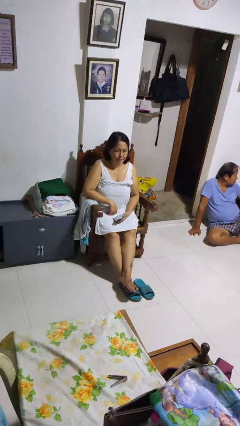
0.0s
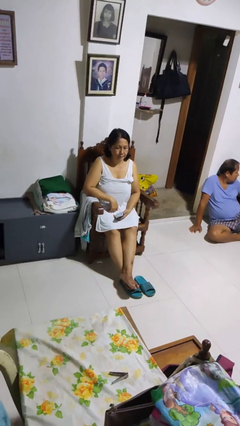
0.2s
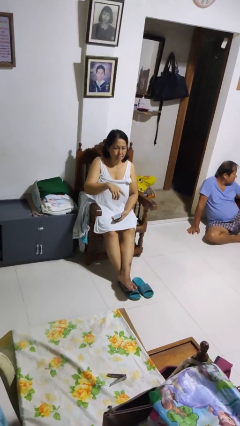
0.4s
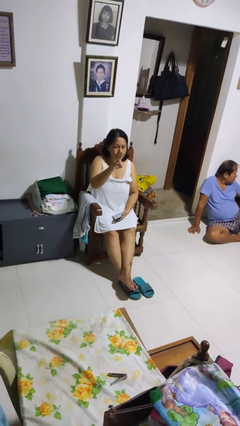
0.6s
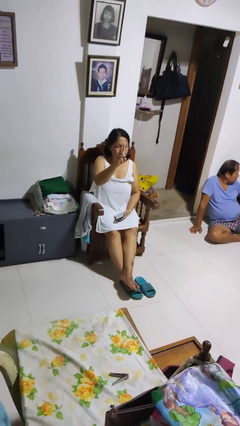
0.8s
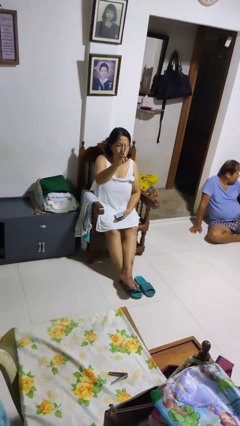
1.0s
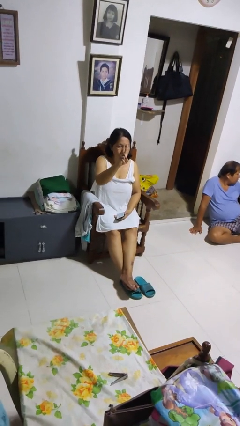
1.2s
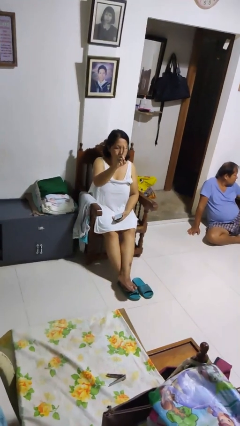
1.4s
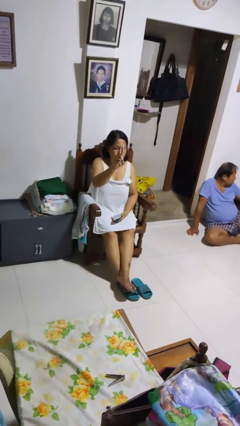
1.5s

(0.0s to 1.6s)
person gestures number one

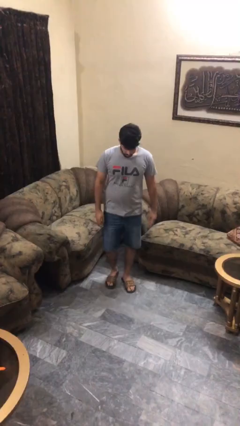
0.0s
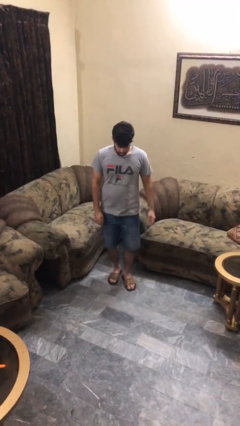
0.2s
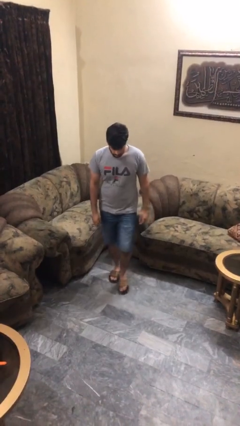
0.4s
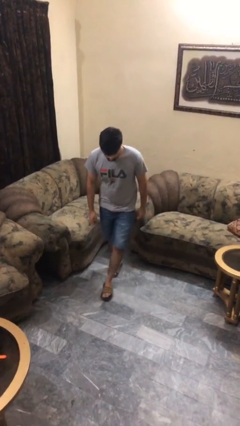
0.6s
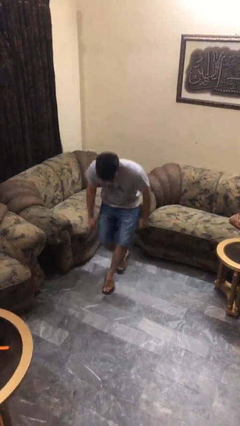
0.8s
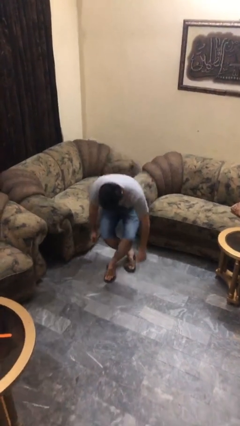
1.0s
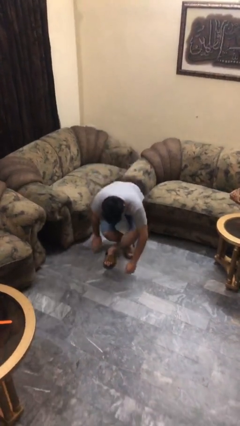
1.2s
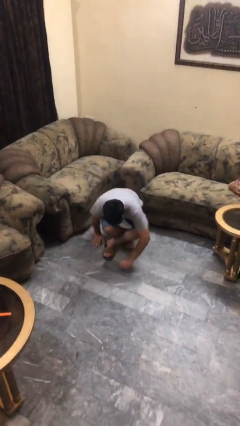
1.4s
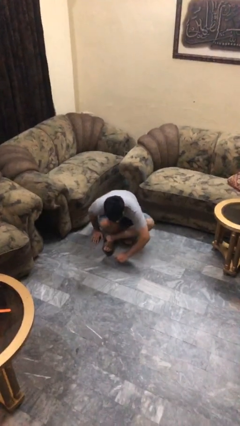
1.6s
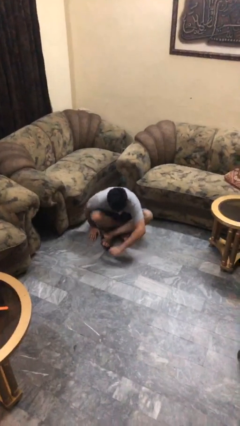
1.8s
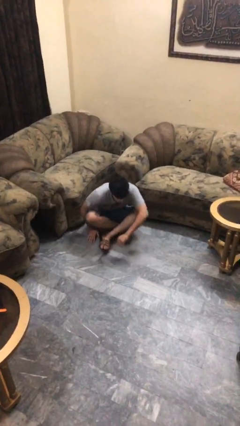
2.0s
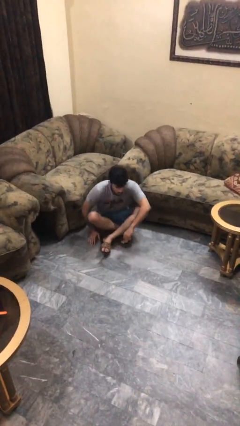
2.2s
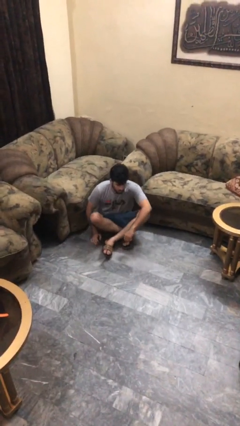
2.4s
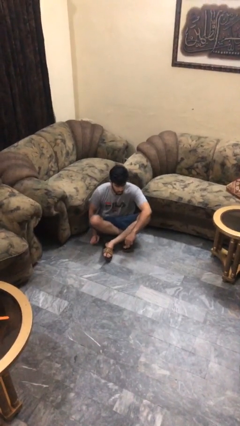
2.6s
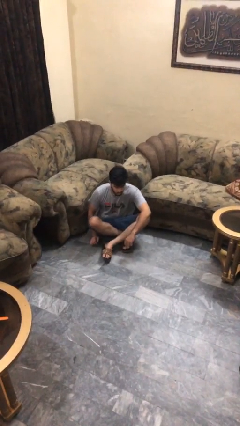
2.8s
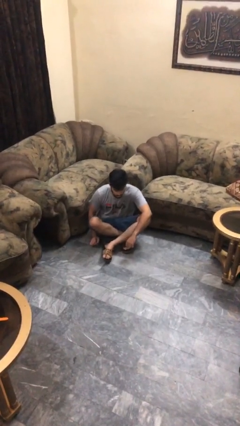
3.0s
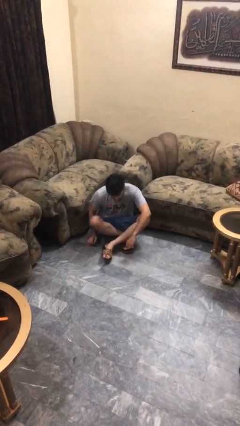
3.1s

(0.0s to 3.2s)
person sits crisscross

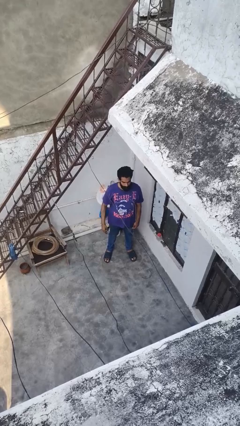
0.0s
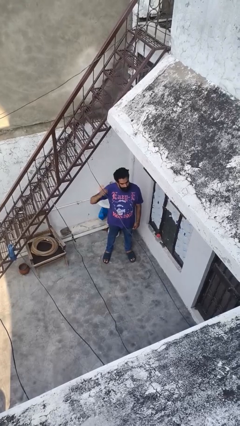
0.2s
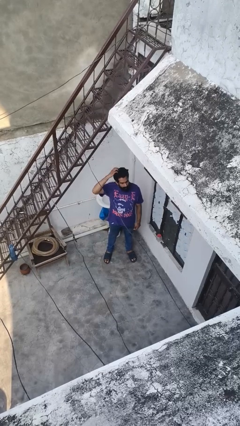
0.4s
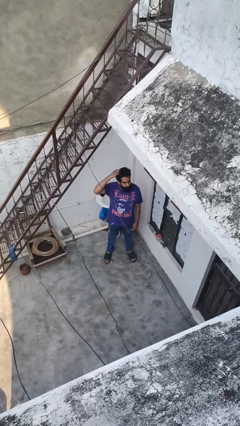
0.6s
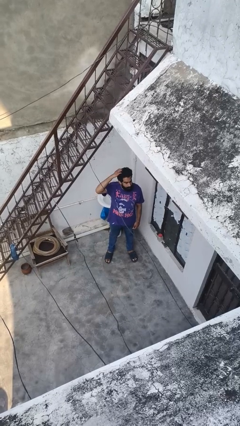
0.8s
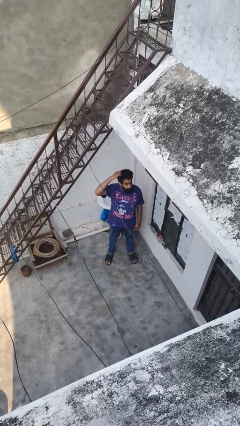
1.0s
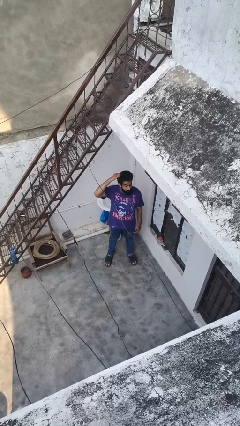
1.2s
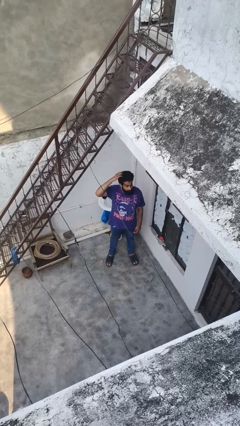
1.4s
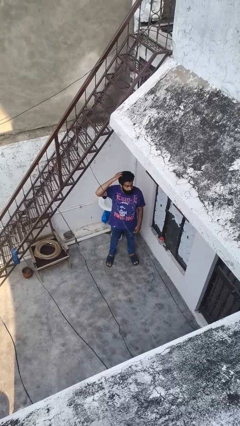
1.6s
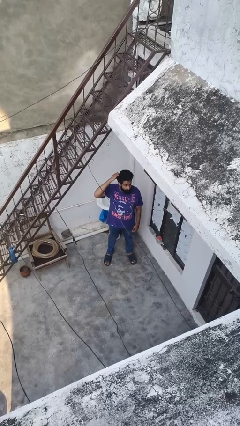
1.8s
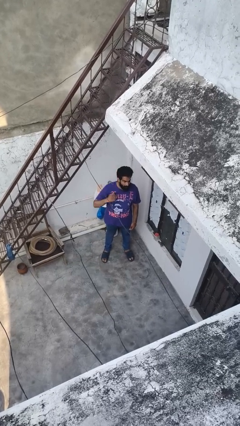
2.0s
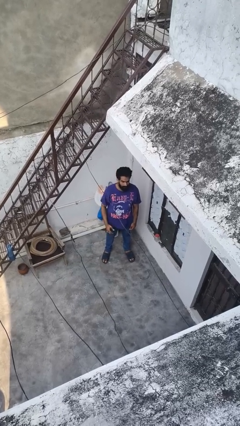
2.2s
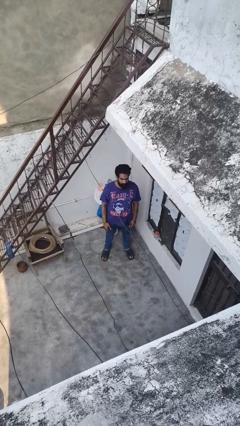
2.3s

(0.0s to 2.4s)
person scratches face

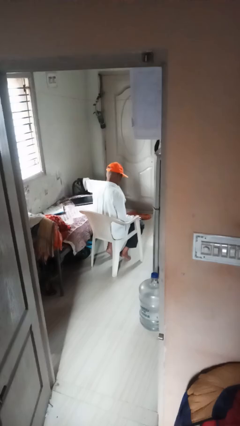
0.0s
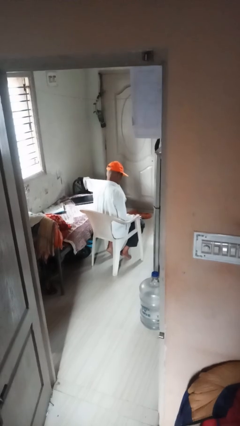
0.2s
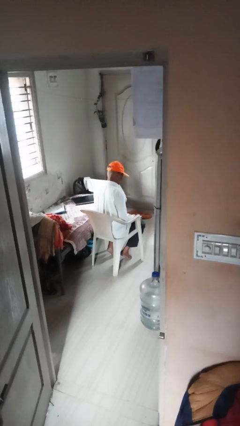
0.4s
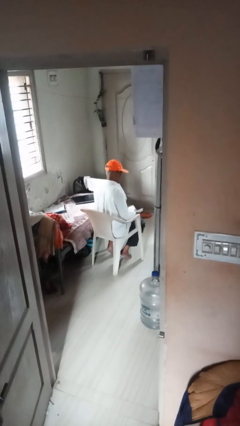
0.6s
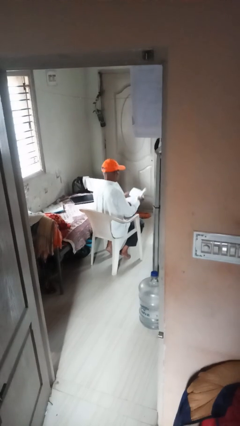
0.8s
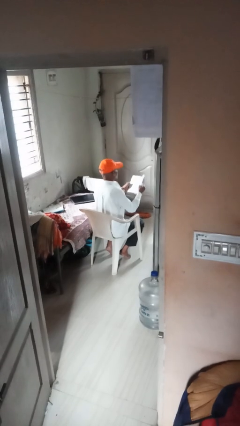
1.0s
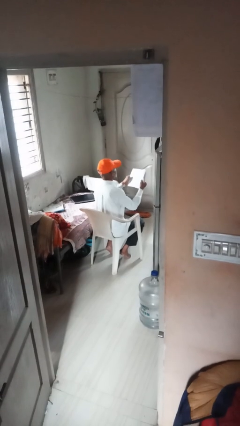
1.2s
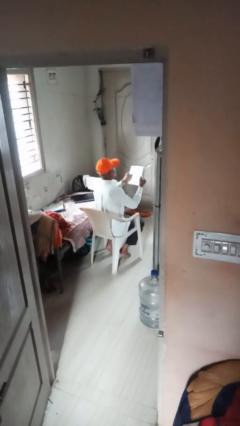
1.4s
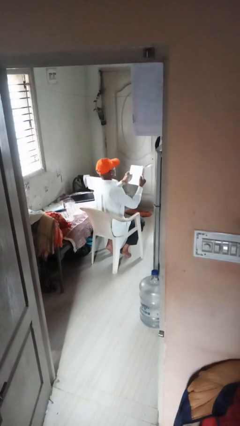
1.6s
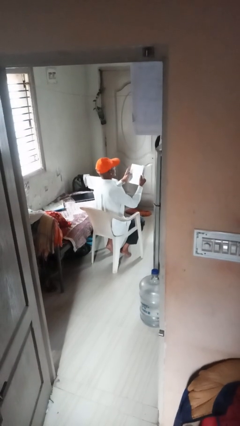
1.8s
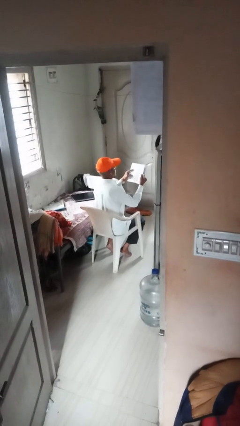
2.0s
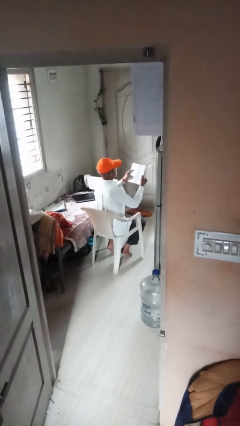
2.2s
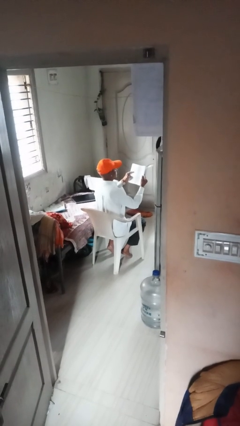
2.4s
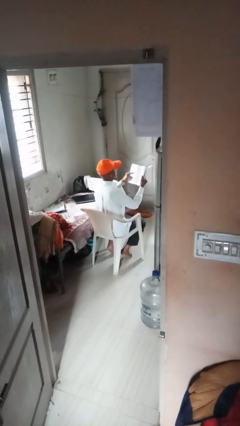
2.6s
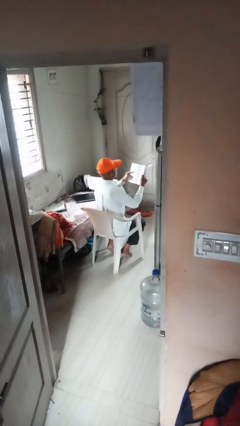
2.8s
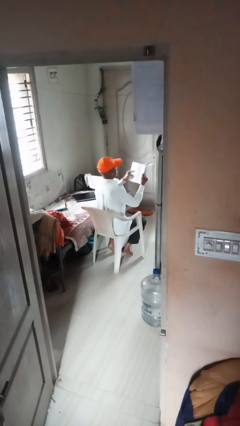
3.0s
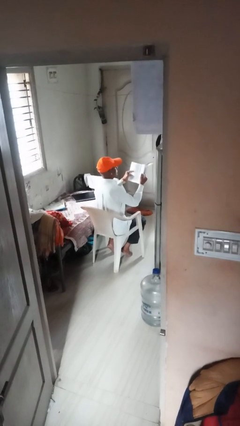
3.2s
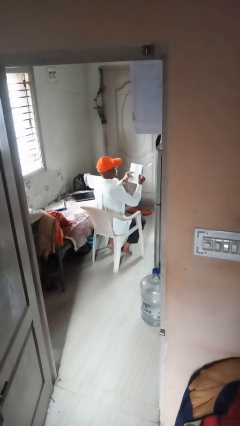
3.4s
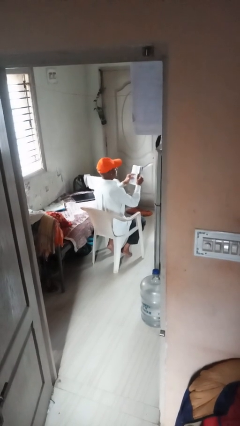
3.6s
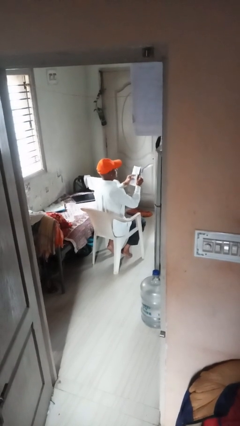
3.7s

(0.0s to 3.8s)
person reads book

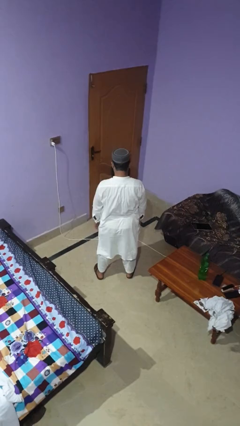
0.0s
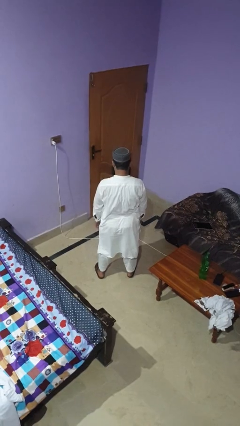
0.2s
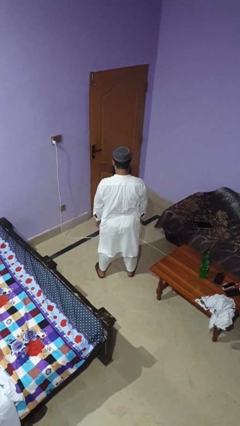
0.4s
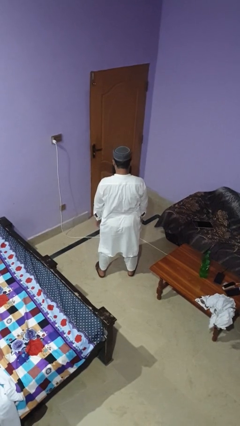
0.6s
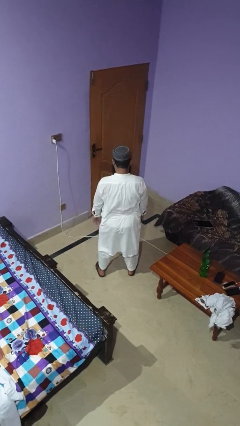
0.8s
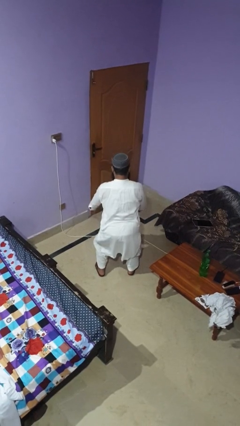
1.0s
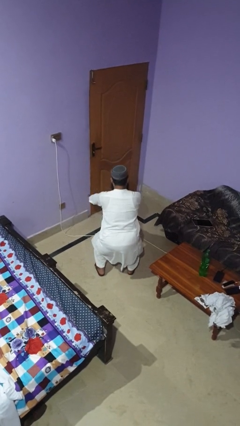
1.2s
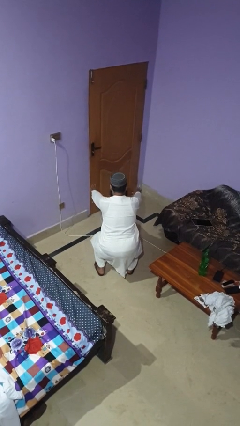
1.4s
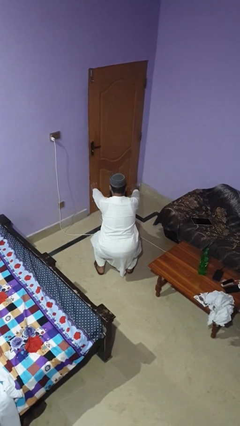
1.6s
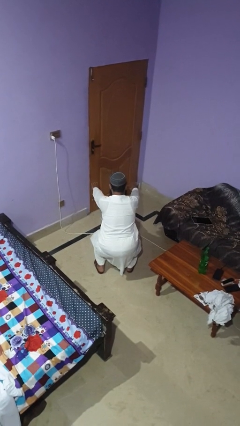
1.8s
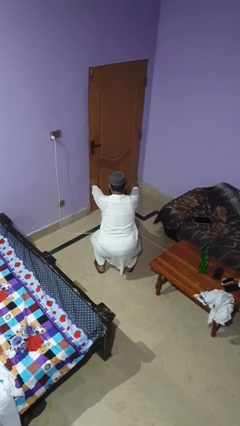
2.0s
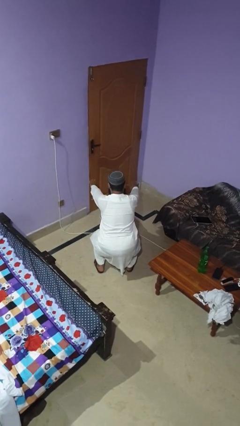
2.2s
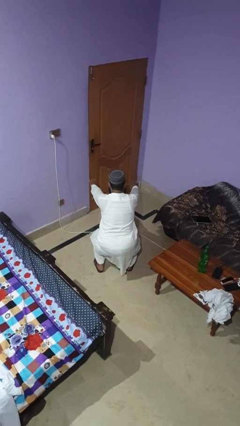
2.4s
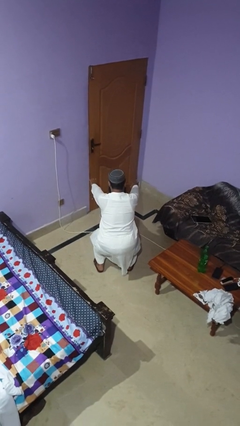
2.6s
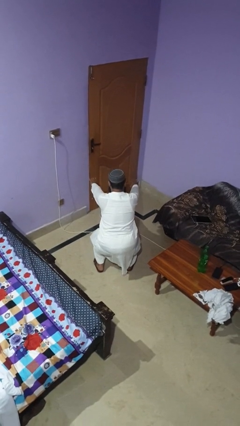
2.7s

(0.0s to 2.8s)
person squats

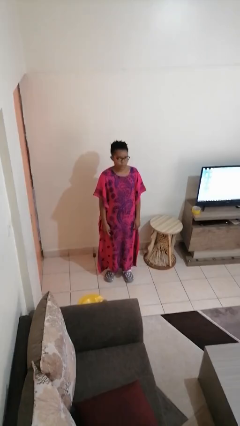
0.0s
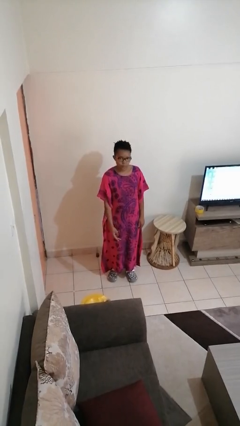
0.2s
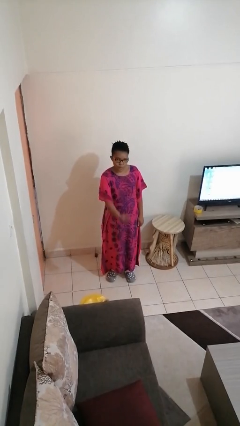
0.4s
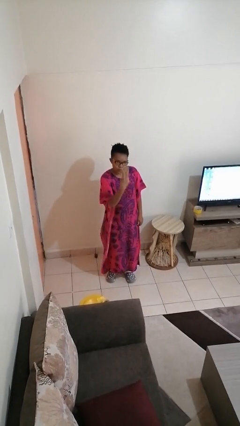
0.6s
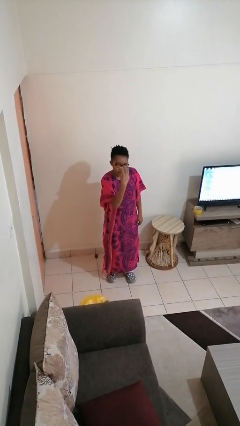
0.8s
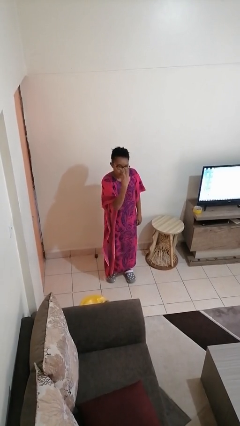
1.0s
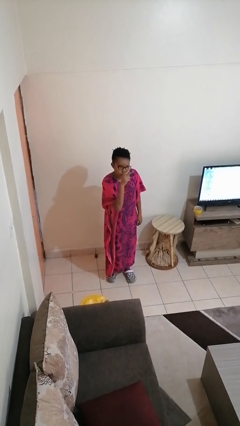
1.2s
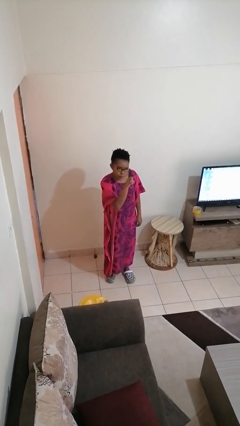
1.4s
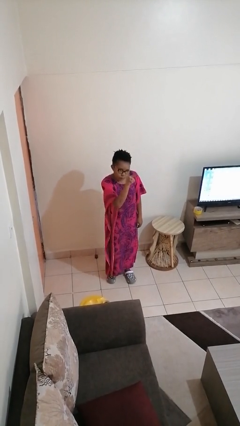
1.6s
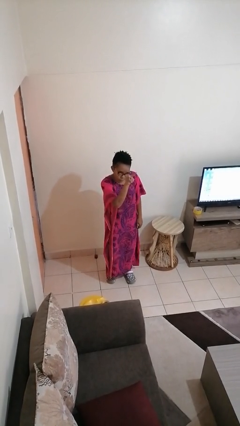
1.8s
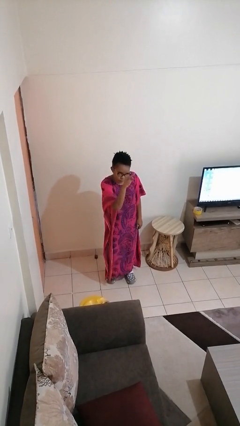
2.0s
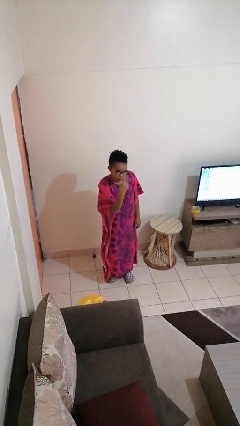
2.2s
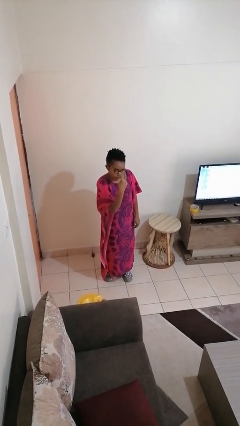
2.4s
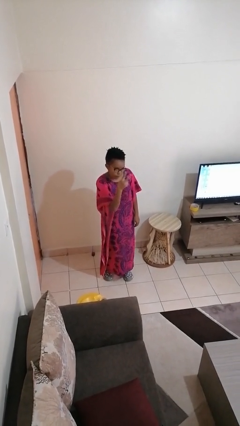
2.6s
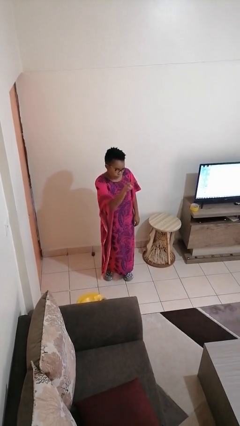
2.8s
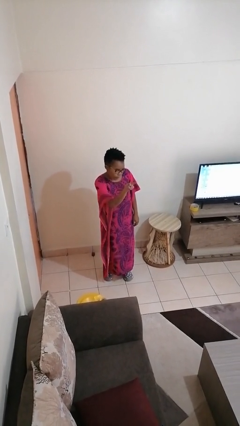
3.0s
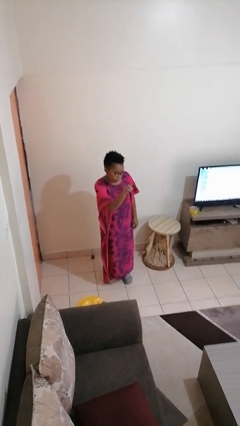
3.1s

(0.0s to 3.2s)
person gestures watch closely

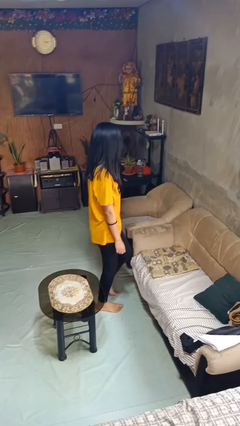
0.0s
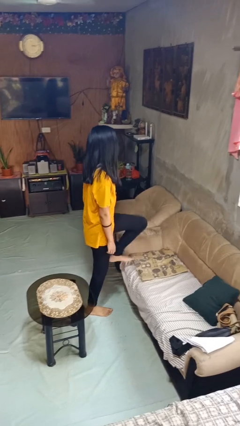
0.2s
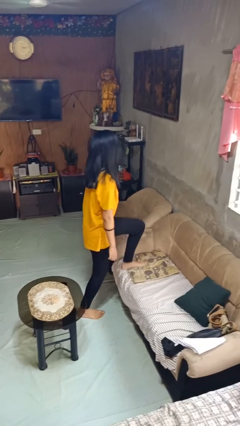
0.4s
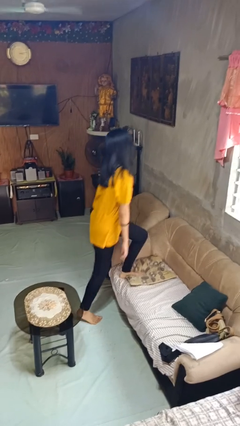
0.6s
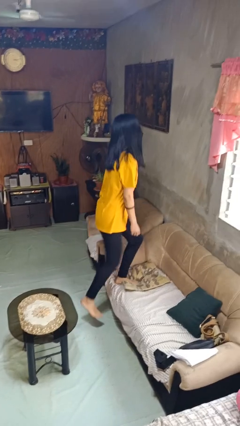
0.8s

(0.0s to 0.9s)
person climbs on couch
